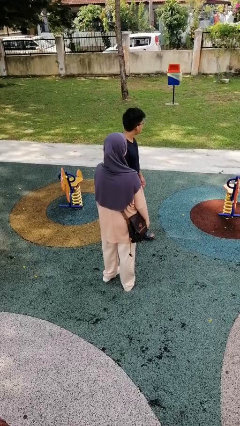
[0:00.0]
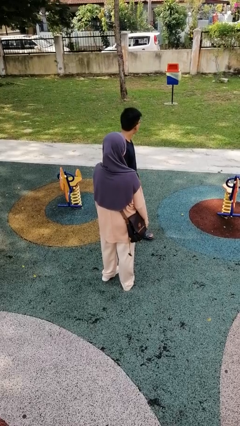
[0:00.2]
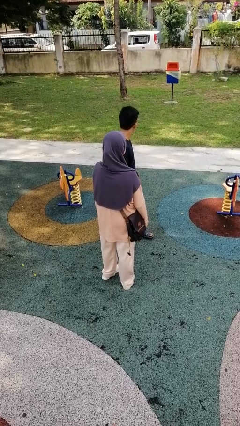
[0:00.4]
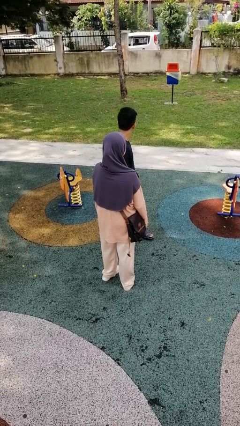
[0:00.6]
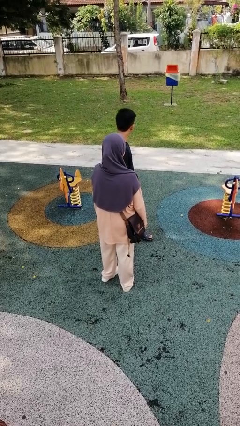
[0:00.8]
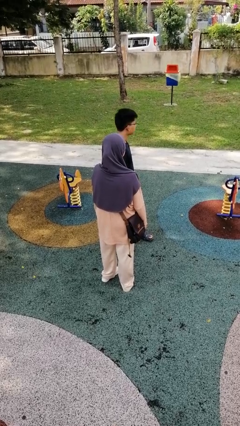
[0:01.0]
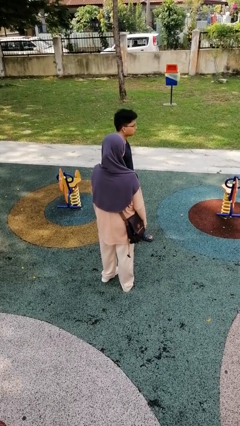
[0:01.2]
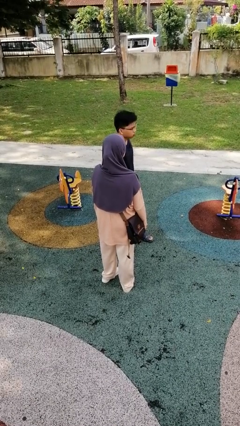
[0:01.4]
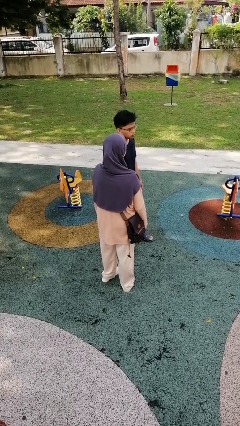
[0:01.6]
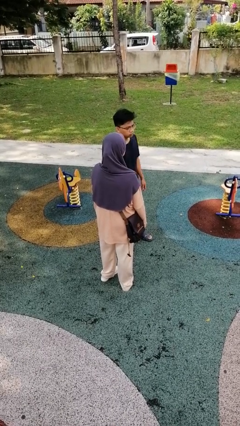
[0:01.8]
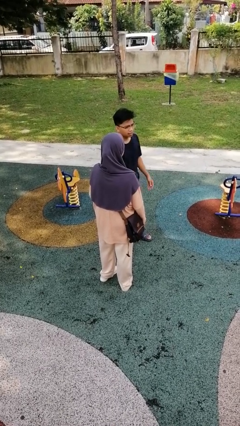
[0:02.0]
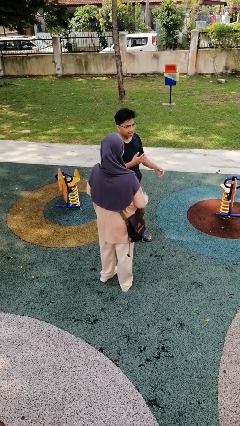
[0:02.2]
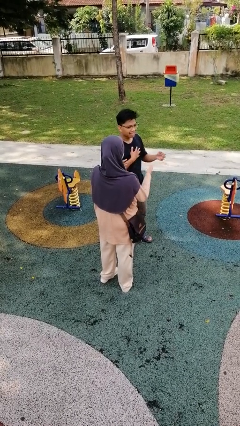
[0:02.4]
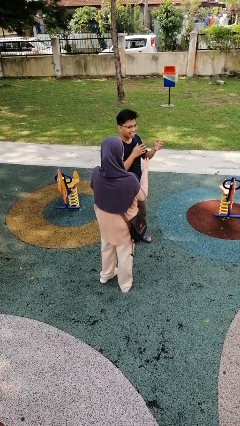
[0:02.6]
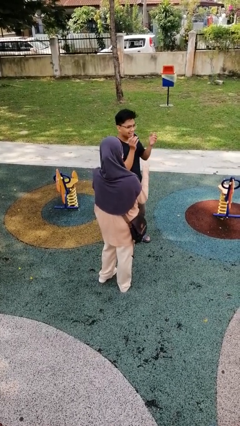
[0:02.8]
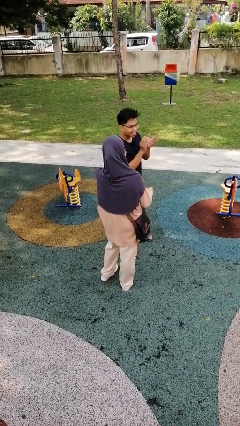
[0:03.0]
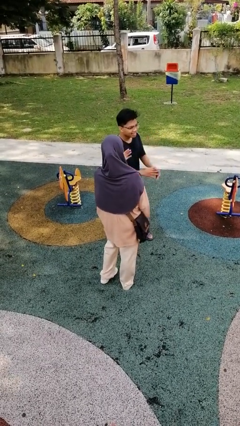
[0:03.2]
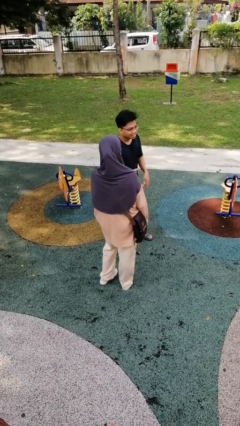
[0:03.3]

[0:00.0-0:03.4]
person laughs with person

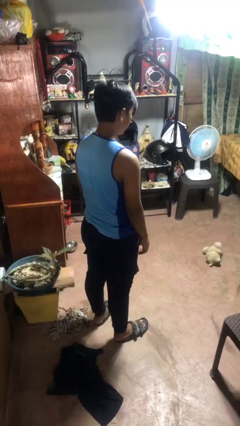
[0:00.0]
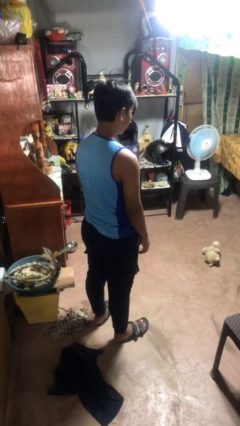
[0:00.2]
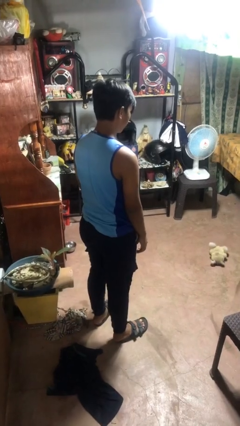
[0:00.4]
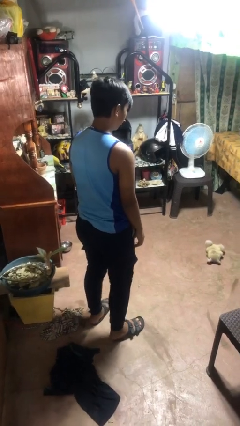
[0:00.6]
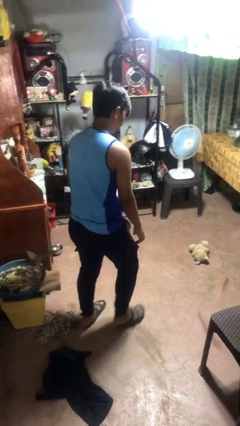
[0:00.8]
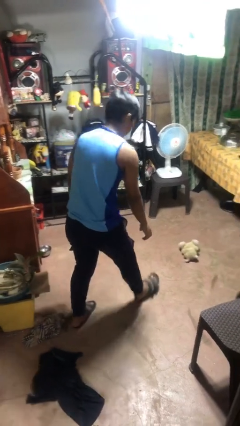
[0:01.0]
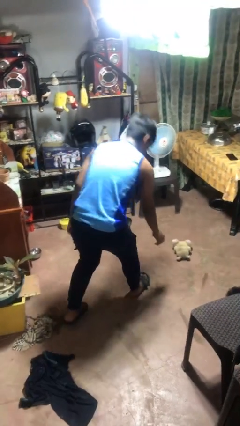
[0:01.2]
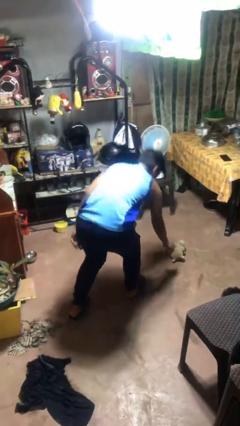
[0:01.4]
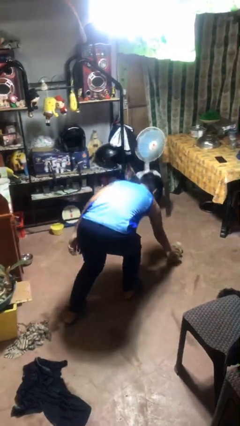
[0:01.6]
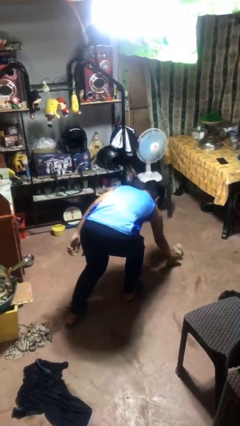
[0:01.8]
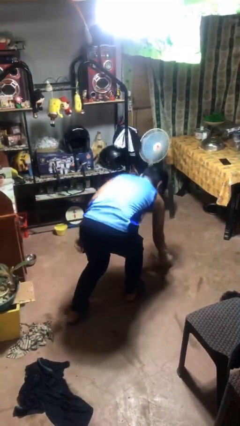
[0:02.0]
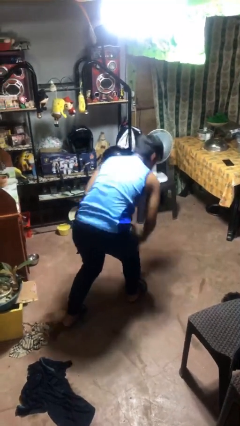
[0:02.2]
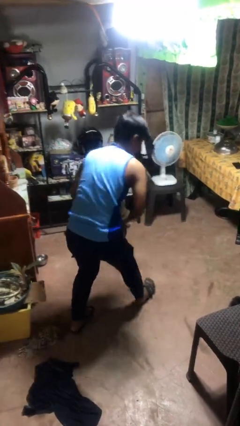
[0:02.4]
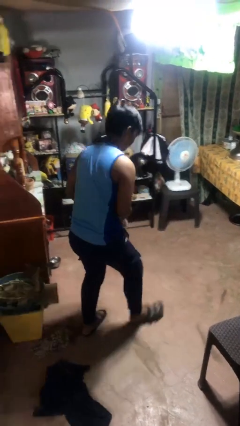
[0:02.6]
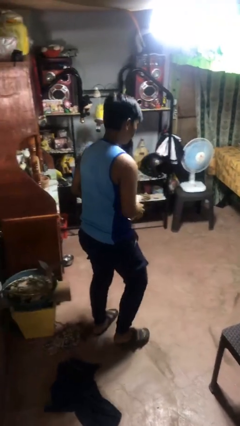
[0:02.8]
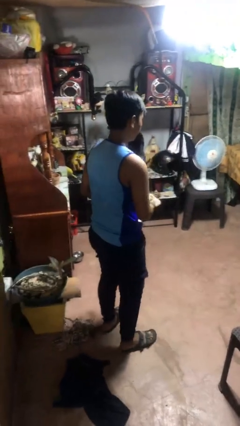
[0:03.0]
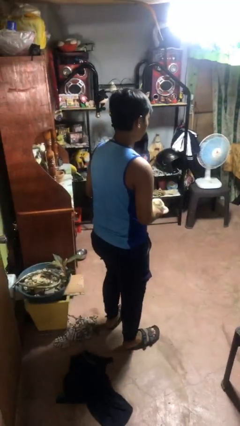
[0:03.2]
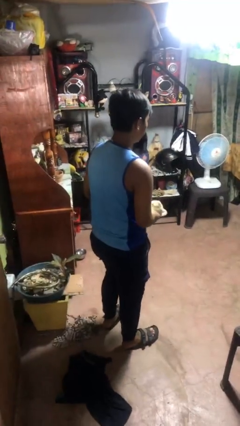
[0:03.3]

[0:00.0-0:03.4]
person picks up object from floor

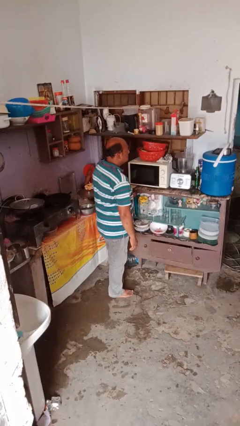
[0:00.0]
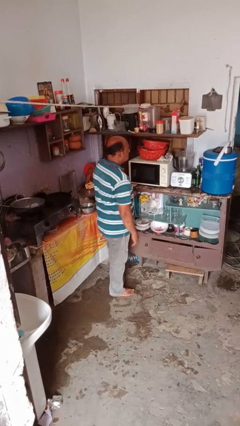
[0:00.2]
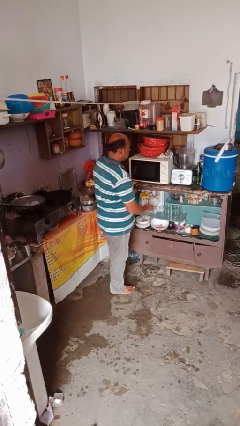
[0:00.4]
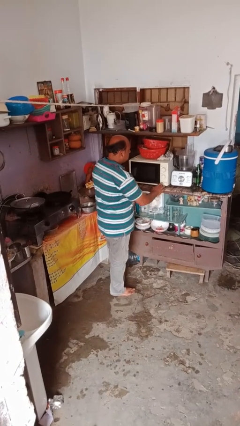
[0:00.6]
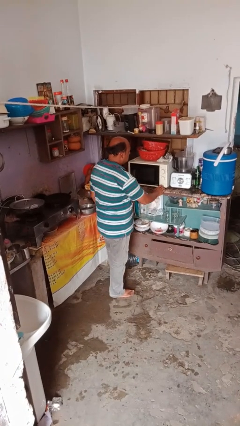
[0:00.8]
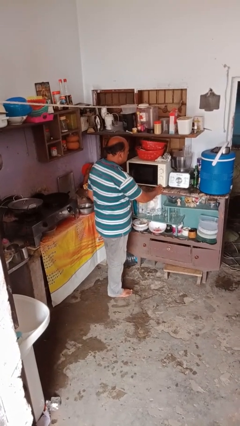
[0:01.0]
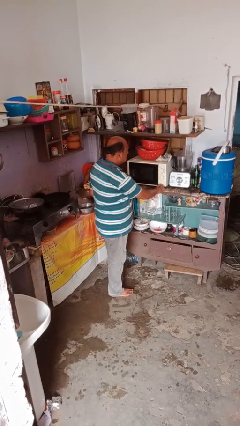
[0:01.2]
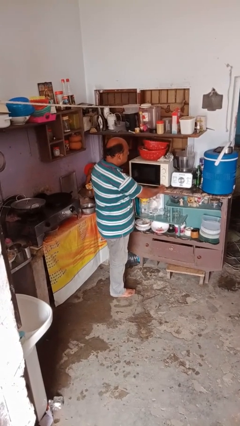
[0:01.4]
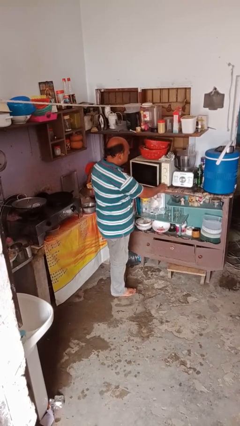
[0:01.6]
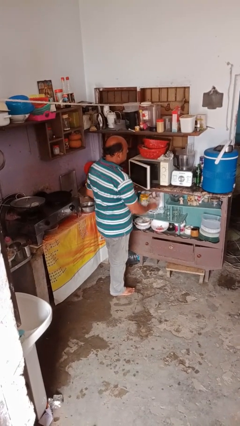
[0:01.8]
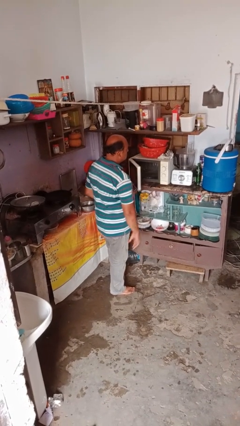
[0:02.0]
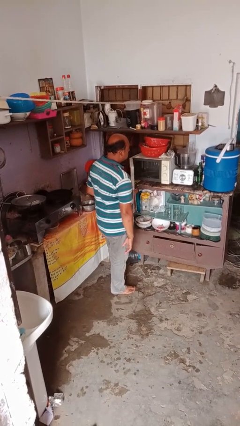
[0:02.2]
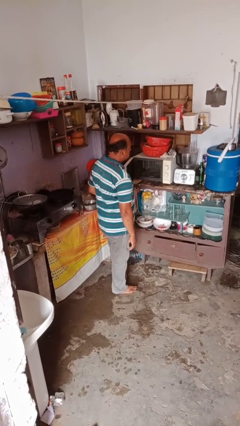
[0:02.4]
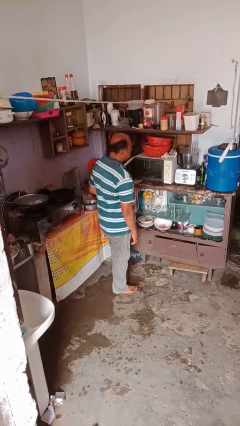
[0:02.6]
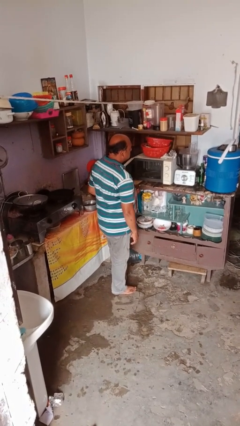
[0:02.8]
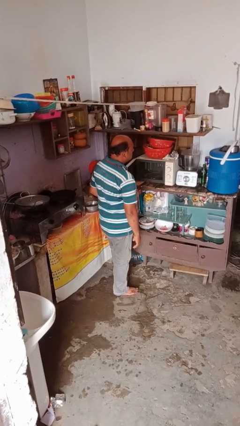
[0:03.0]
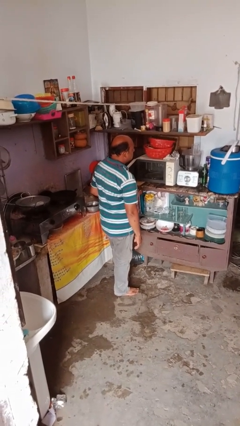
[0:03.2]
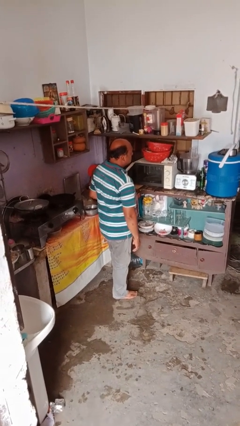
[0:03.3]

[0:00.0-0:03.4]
person opens microwave

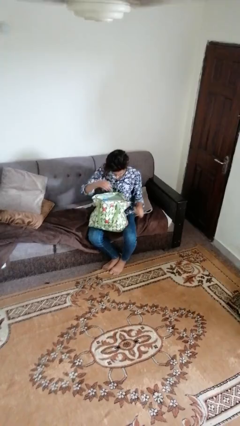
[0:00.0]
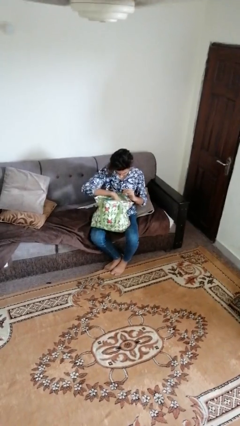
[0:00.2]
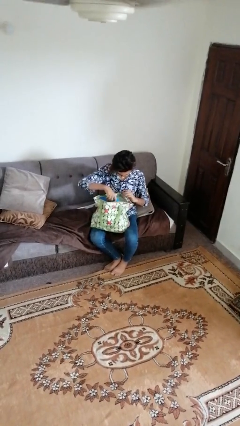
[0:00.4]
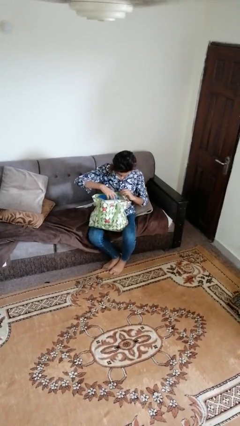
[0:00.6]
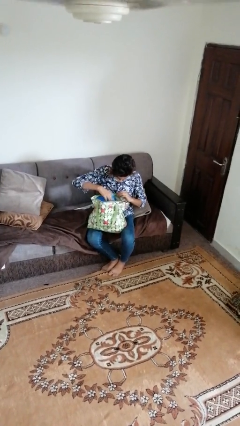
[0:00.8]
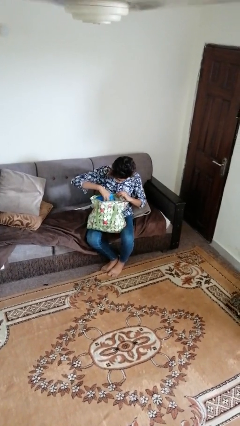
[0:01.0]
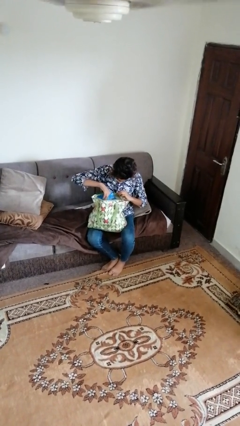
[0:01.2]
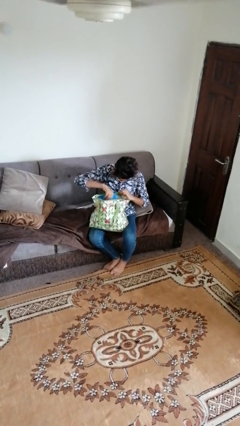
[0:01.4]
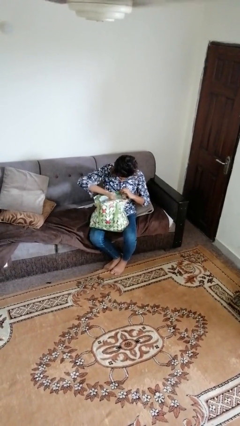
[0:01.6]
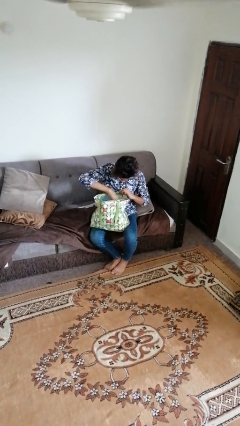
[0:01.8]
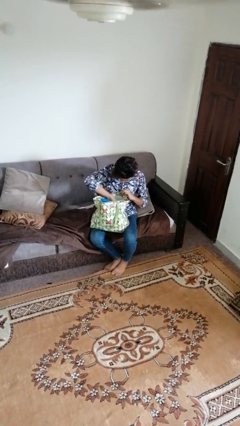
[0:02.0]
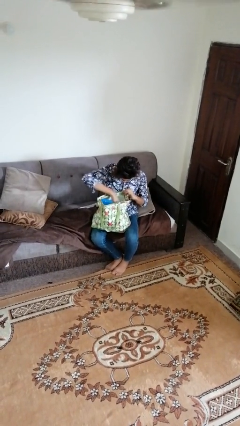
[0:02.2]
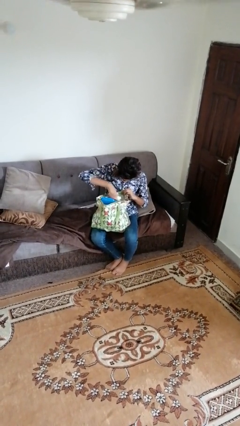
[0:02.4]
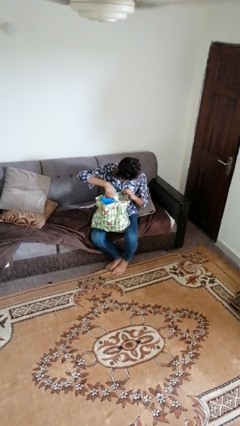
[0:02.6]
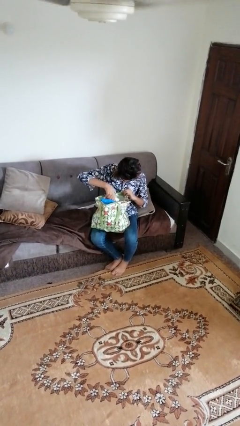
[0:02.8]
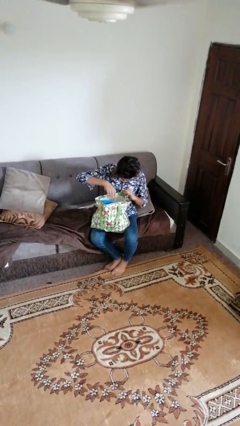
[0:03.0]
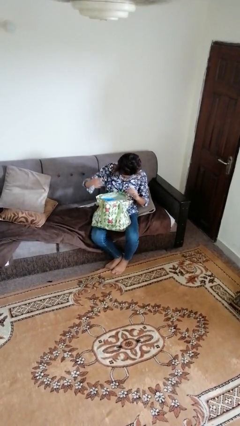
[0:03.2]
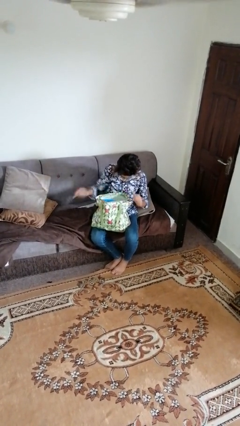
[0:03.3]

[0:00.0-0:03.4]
person searches in bag

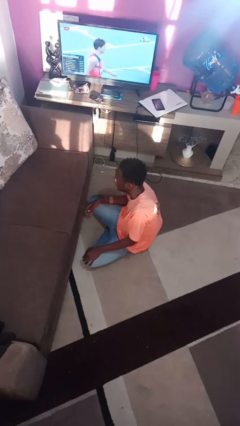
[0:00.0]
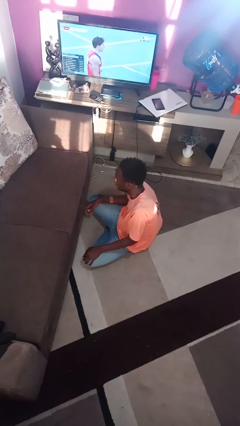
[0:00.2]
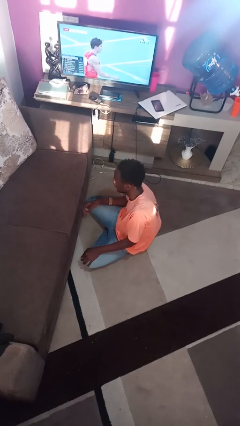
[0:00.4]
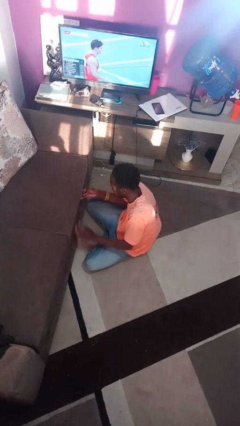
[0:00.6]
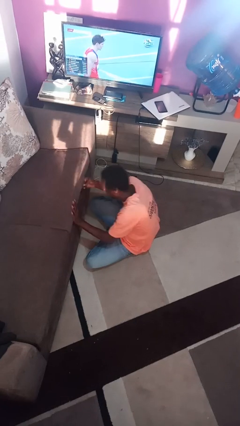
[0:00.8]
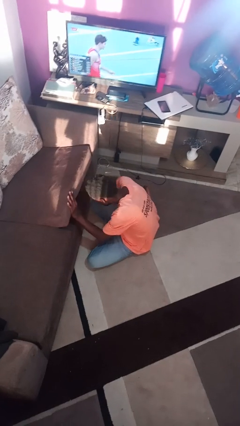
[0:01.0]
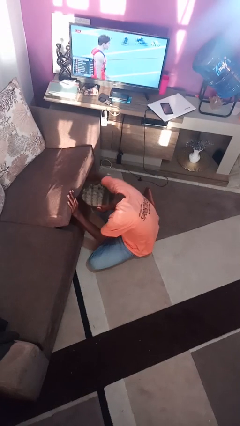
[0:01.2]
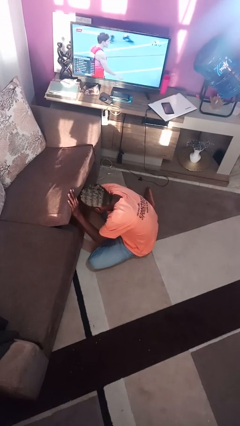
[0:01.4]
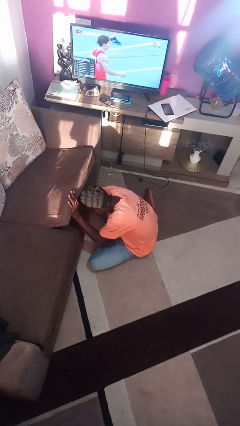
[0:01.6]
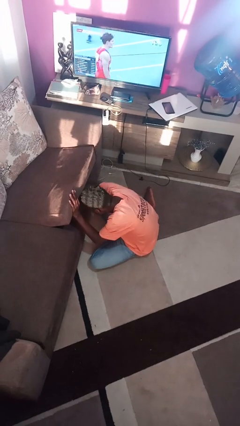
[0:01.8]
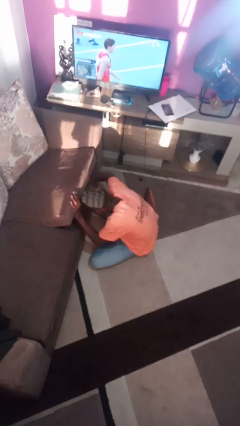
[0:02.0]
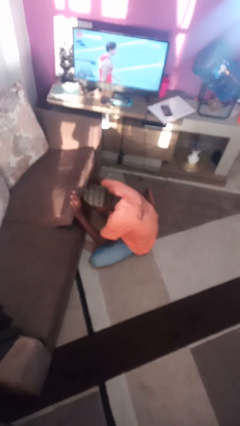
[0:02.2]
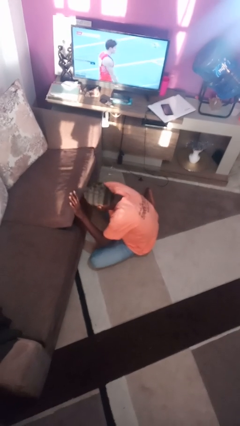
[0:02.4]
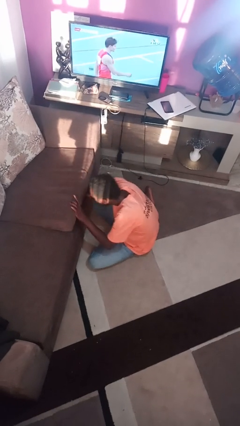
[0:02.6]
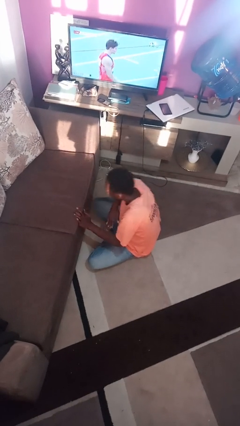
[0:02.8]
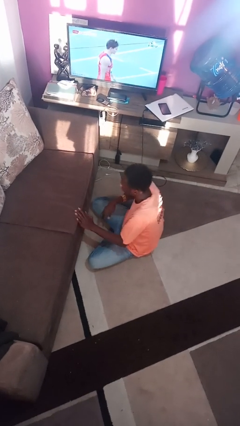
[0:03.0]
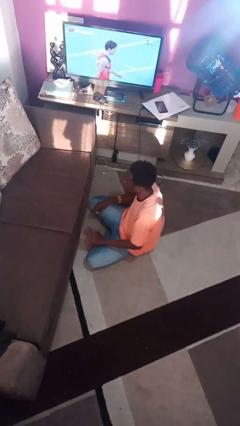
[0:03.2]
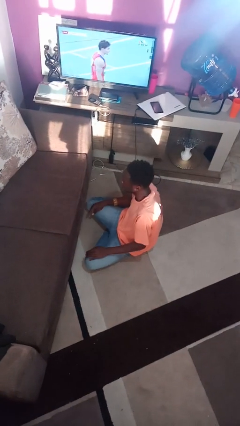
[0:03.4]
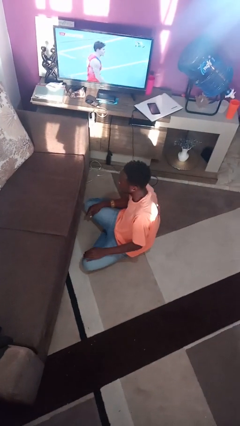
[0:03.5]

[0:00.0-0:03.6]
person searches under couch

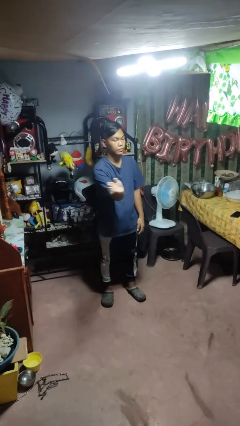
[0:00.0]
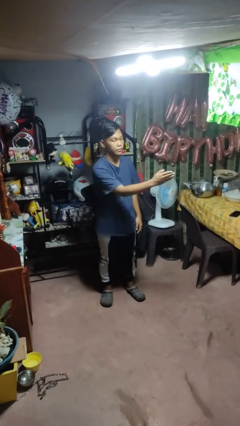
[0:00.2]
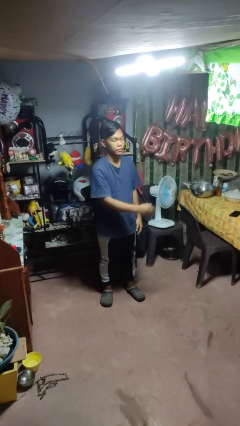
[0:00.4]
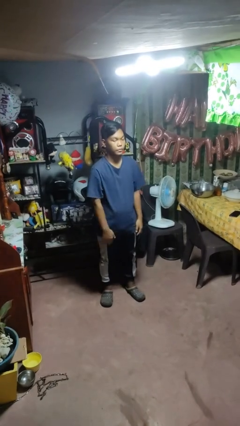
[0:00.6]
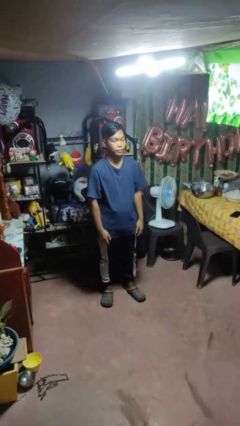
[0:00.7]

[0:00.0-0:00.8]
person gestures swipe left
